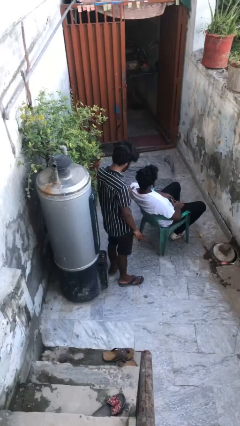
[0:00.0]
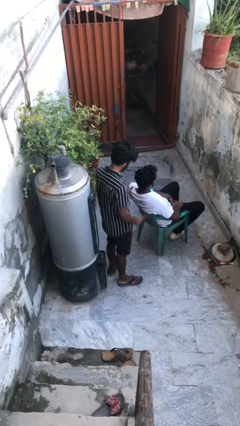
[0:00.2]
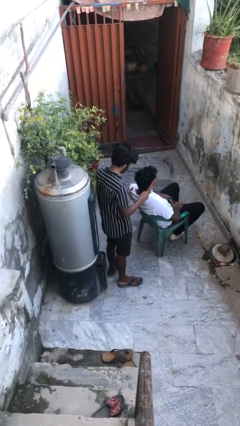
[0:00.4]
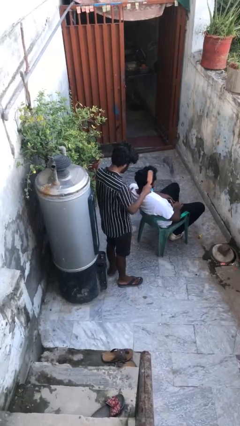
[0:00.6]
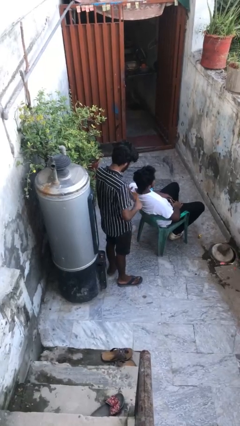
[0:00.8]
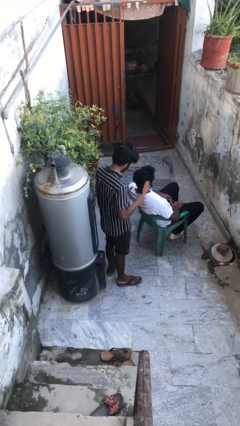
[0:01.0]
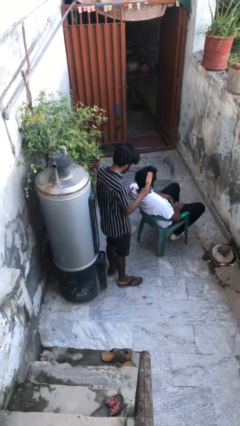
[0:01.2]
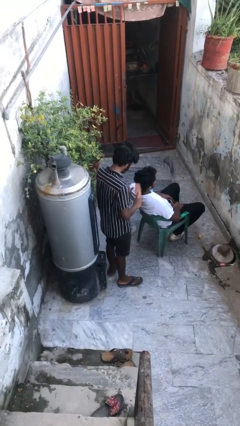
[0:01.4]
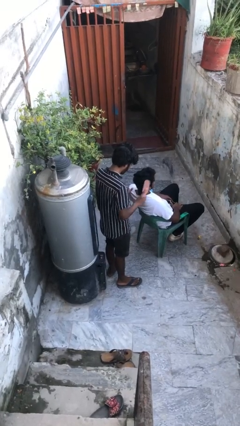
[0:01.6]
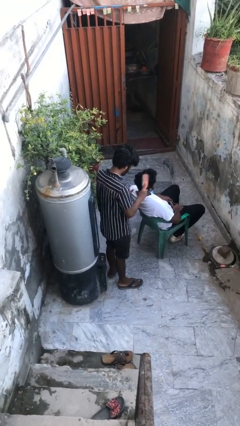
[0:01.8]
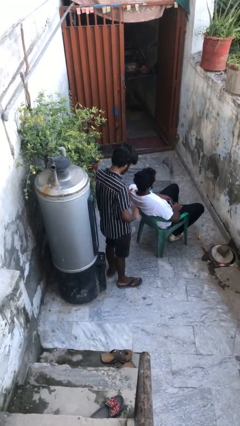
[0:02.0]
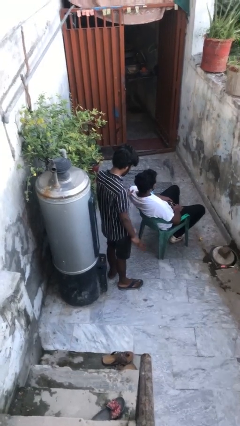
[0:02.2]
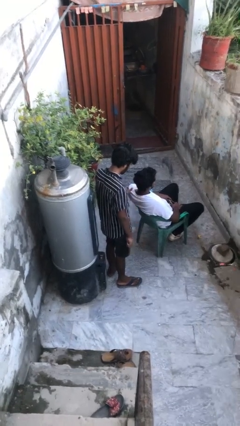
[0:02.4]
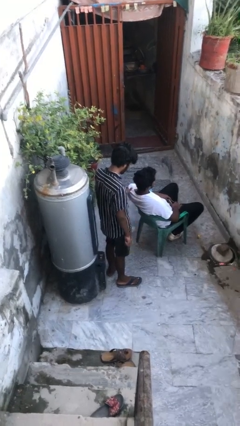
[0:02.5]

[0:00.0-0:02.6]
person brushes hair of person

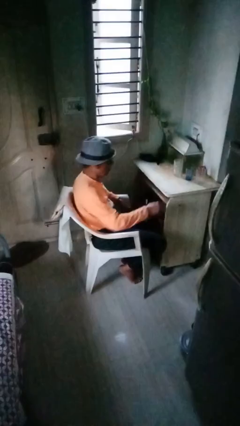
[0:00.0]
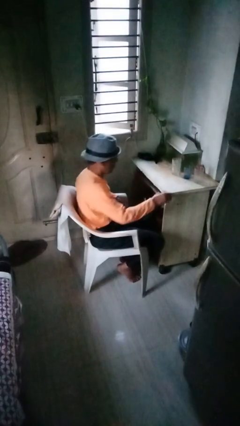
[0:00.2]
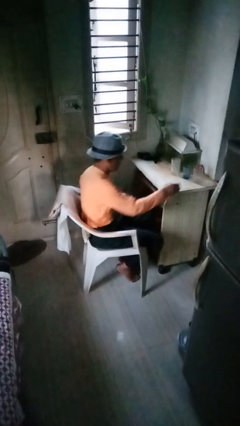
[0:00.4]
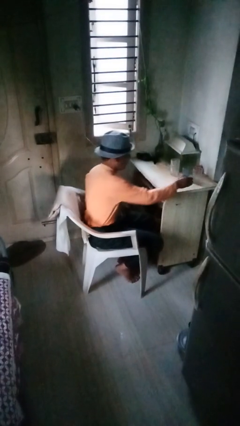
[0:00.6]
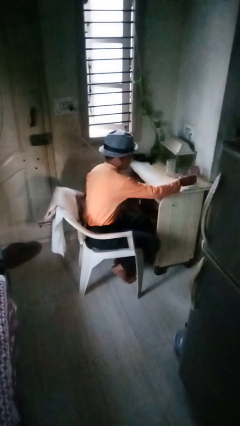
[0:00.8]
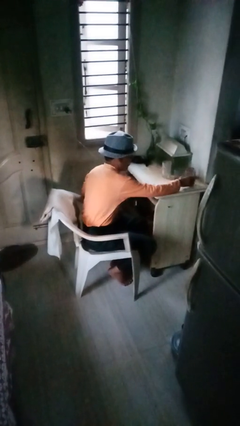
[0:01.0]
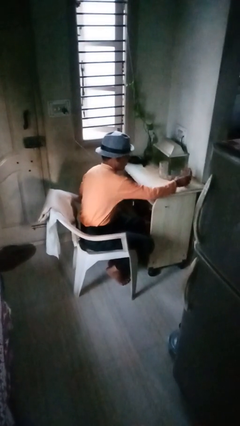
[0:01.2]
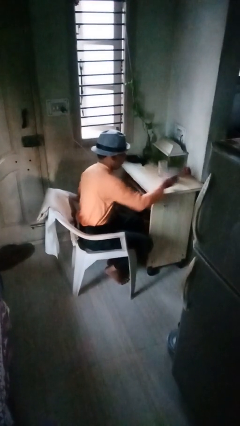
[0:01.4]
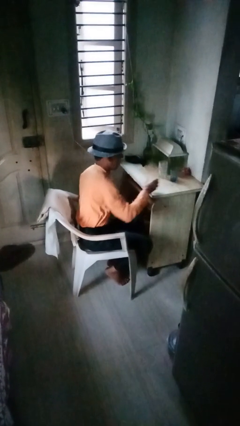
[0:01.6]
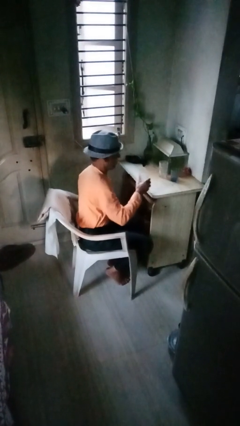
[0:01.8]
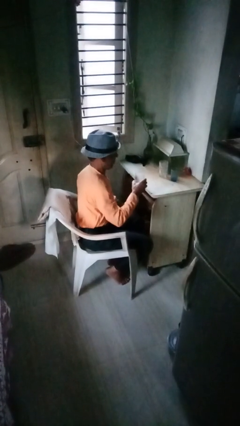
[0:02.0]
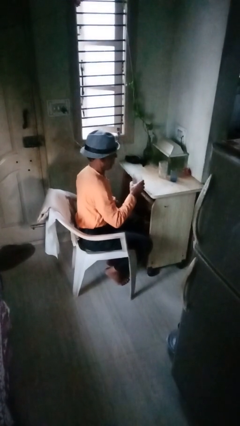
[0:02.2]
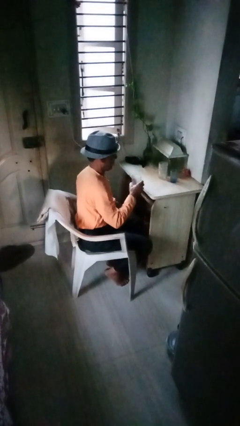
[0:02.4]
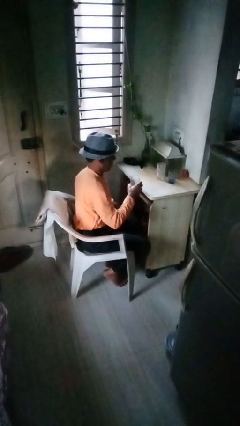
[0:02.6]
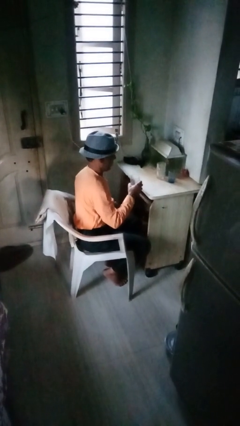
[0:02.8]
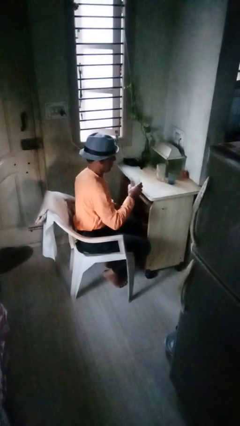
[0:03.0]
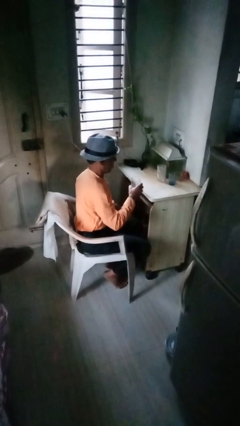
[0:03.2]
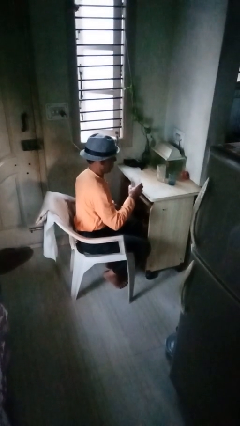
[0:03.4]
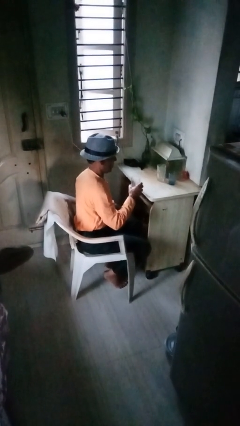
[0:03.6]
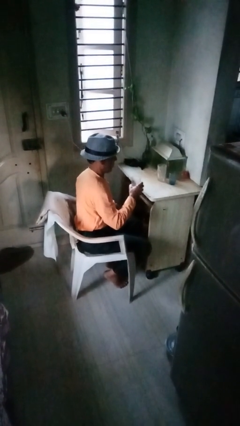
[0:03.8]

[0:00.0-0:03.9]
person picks up object from table

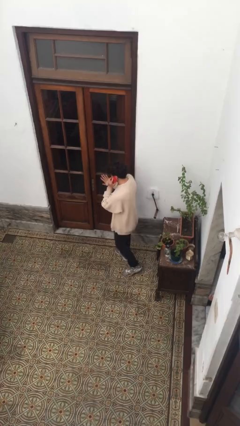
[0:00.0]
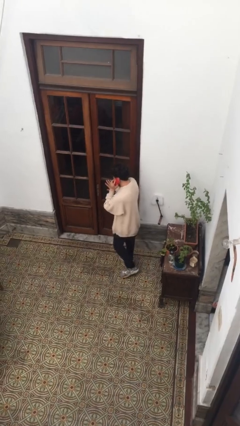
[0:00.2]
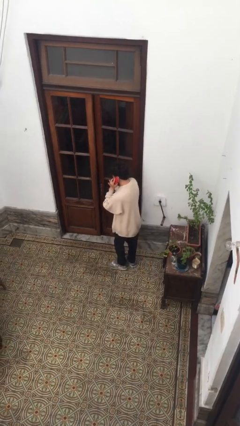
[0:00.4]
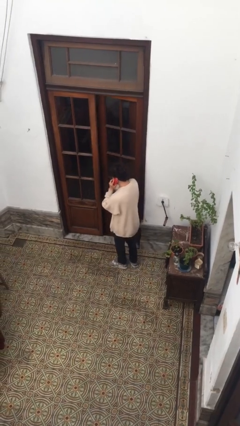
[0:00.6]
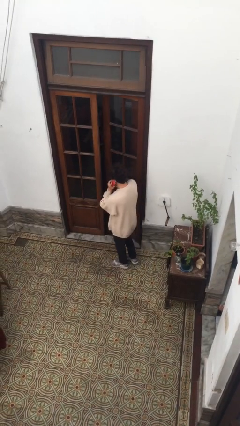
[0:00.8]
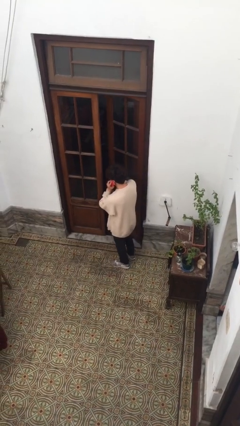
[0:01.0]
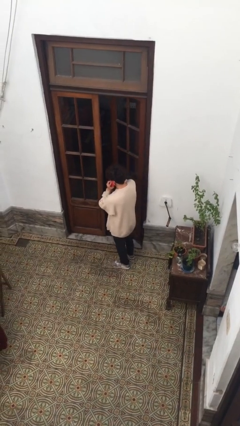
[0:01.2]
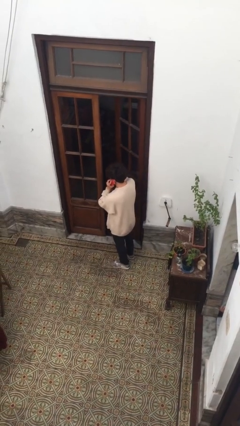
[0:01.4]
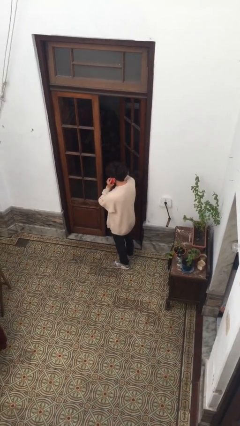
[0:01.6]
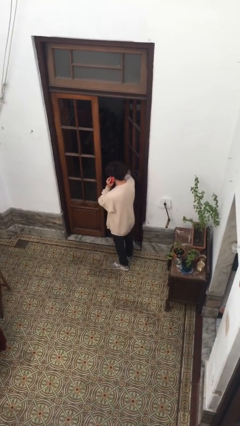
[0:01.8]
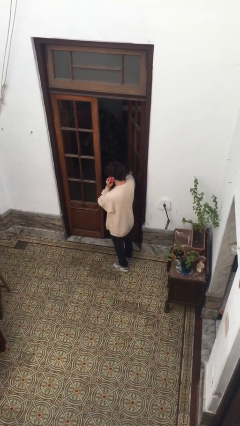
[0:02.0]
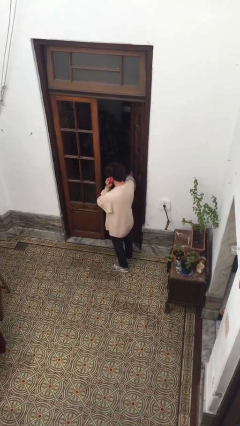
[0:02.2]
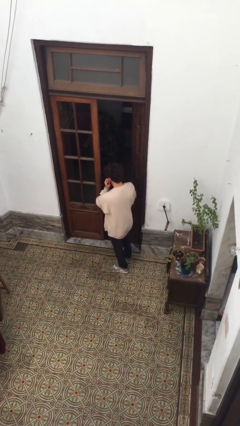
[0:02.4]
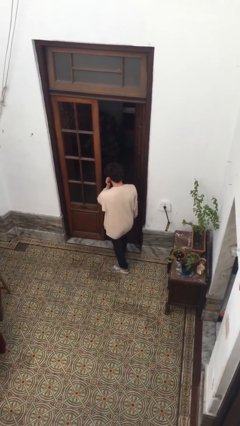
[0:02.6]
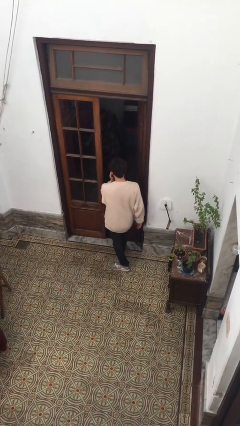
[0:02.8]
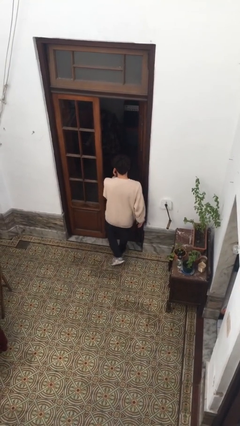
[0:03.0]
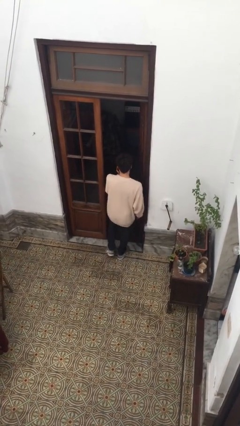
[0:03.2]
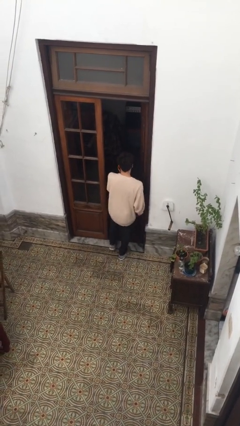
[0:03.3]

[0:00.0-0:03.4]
person opens facility door

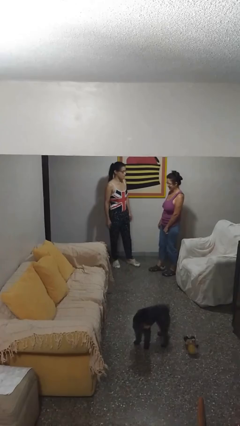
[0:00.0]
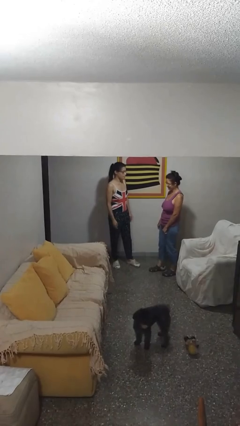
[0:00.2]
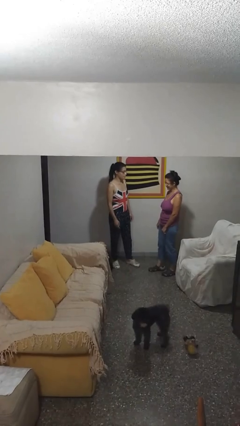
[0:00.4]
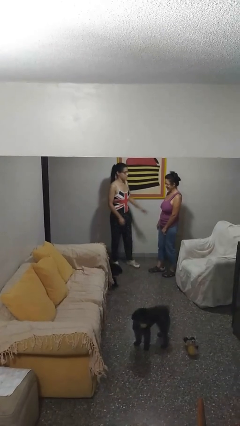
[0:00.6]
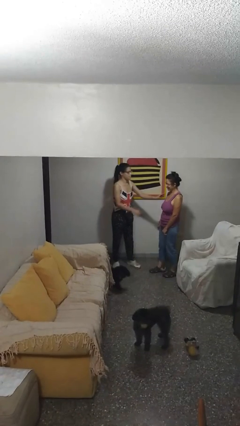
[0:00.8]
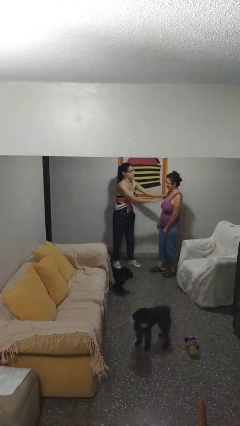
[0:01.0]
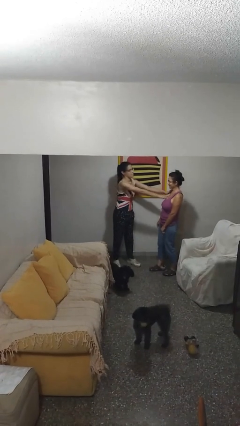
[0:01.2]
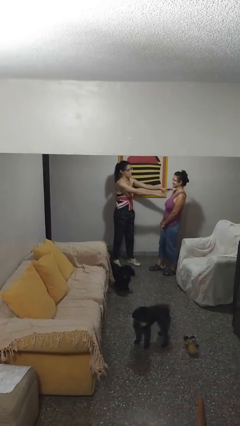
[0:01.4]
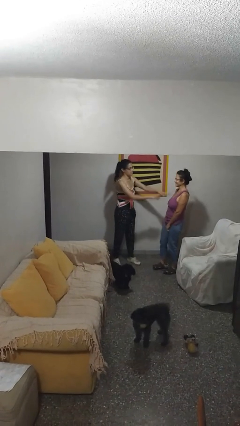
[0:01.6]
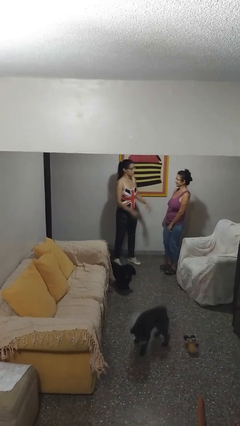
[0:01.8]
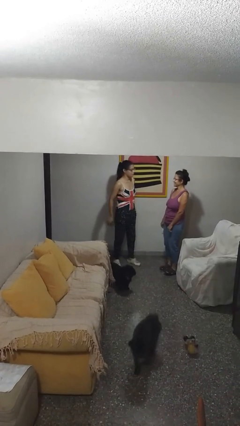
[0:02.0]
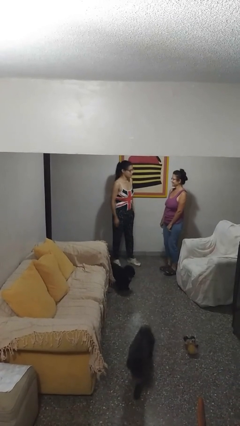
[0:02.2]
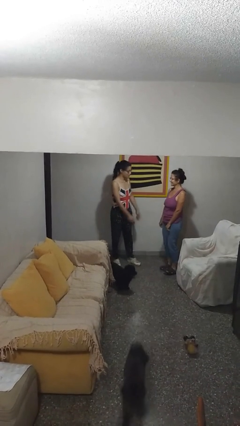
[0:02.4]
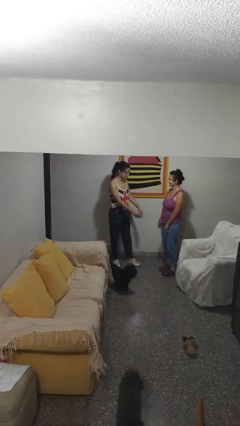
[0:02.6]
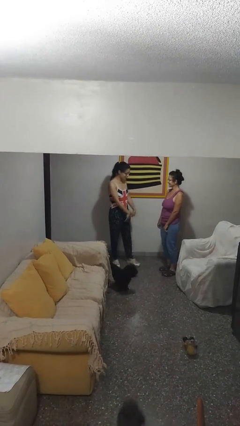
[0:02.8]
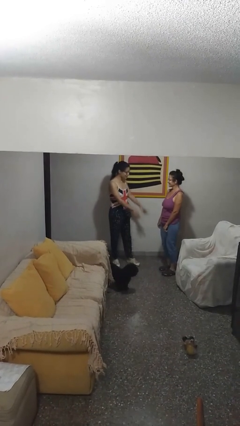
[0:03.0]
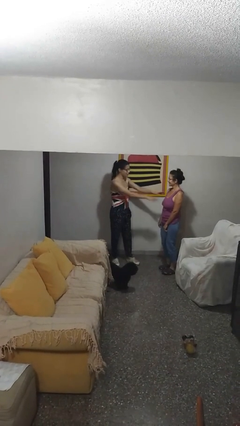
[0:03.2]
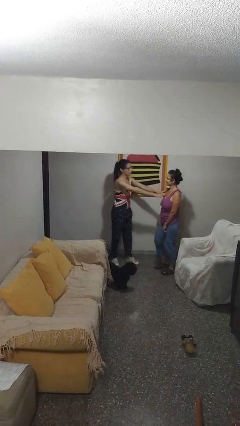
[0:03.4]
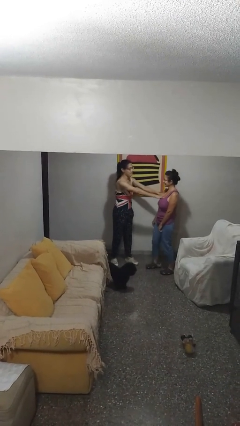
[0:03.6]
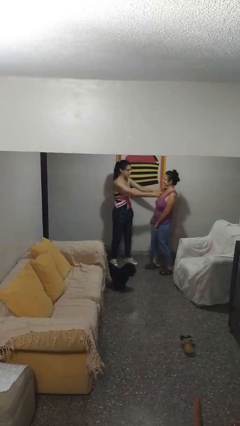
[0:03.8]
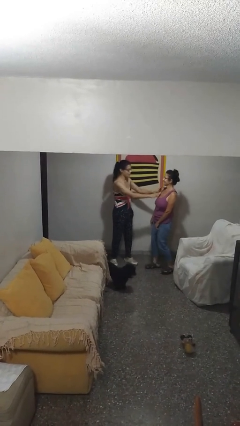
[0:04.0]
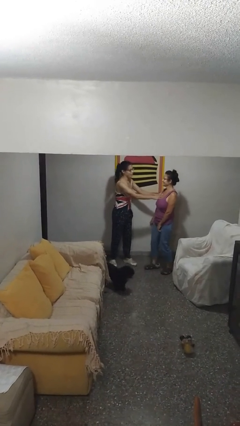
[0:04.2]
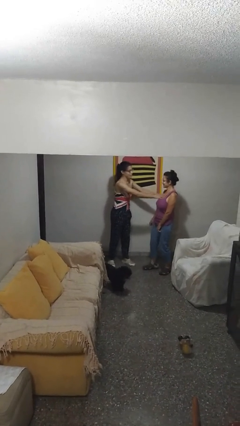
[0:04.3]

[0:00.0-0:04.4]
person shoves person

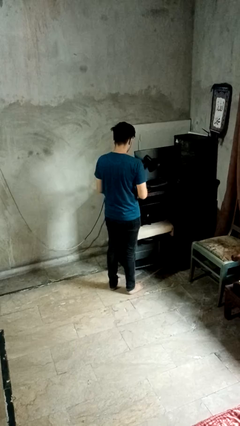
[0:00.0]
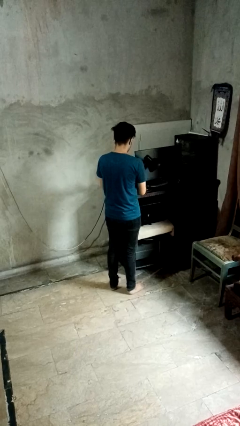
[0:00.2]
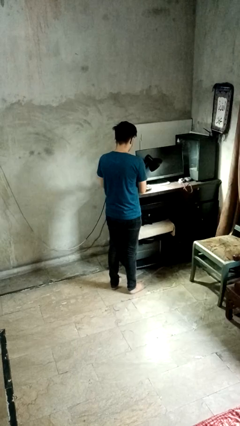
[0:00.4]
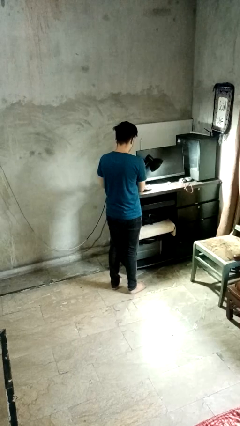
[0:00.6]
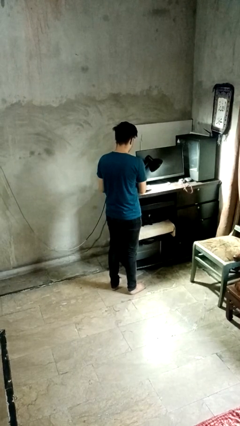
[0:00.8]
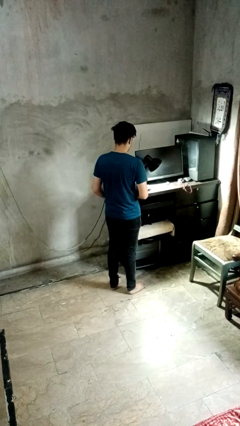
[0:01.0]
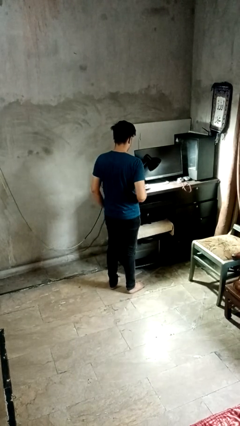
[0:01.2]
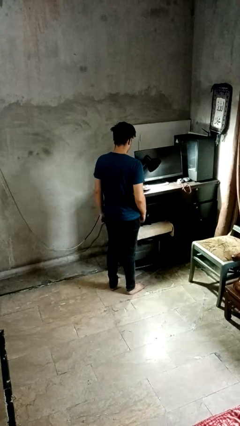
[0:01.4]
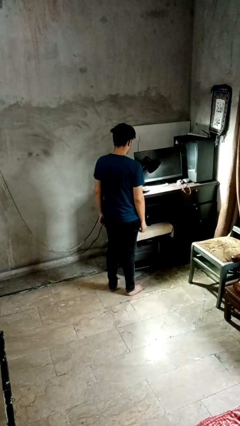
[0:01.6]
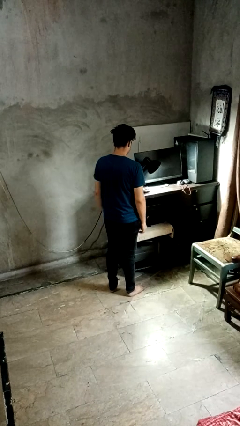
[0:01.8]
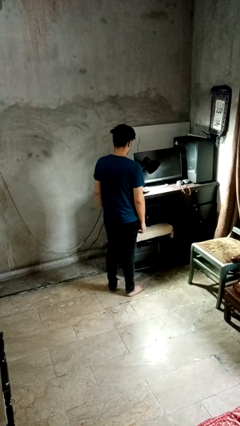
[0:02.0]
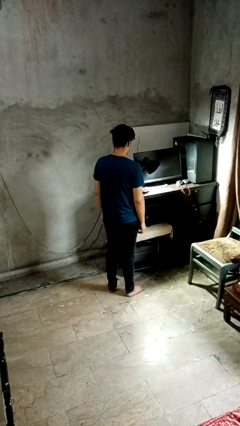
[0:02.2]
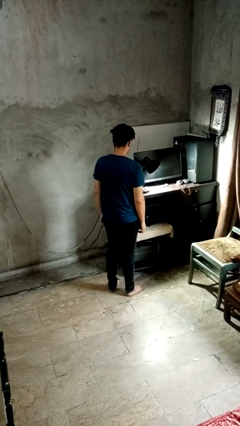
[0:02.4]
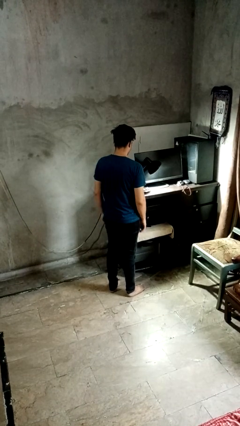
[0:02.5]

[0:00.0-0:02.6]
person turns on lamp

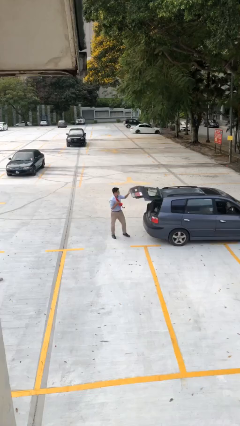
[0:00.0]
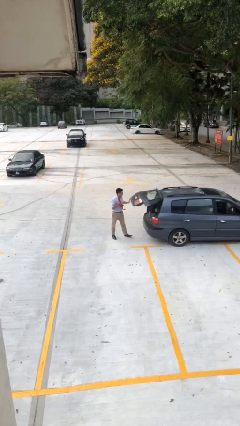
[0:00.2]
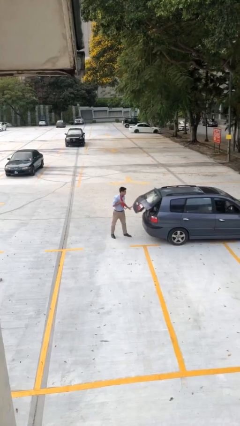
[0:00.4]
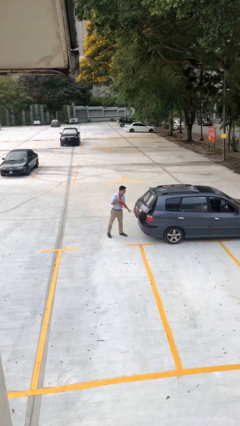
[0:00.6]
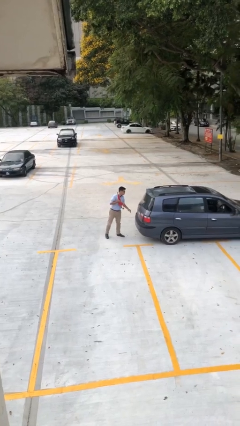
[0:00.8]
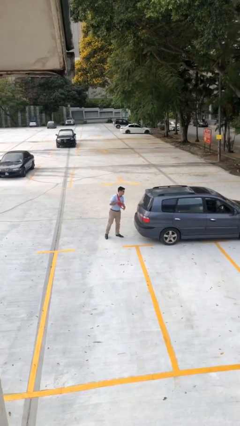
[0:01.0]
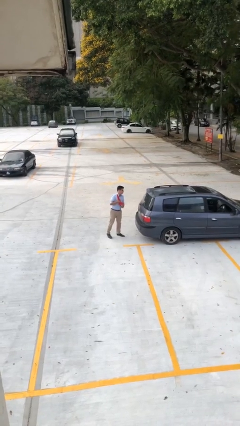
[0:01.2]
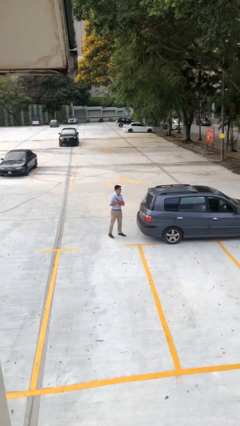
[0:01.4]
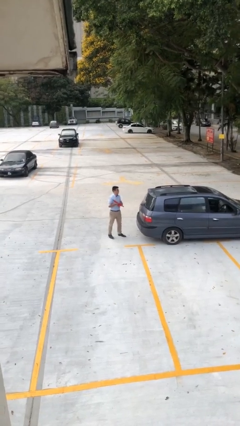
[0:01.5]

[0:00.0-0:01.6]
person closes car trunk
